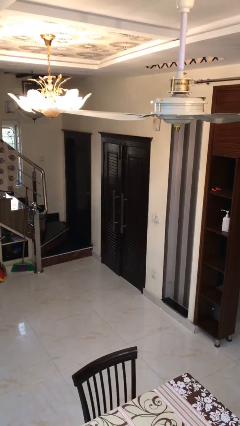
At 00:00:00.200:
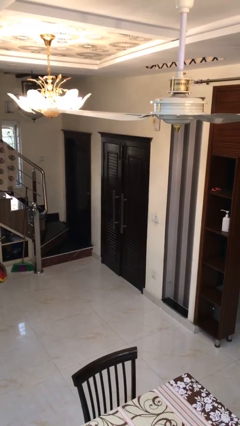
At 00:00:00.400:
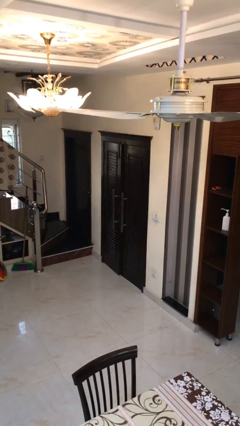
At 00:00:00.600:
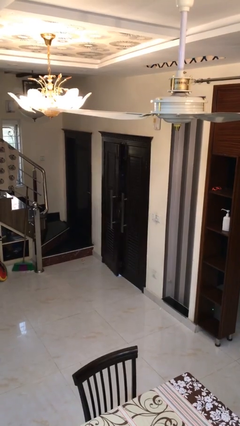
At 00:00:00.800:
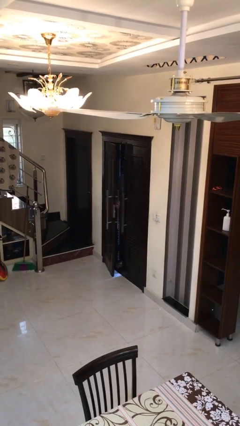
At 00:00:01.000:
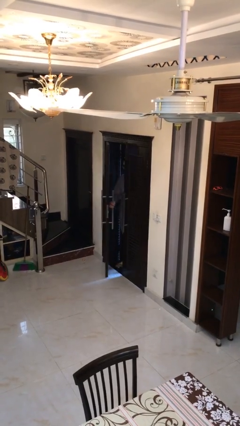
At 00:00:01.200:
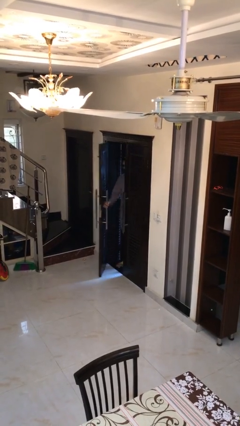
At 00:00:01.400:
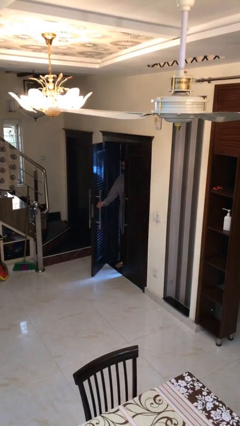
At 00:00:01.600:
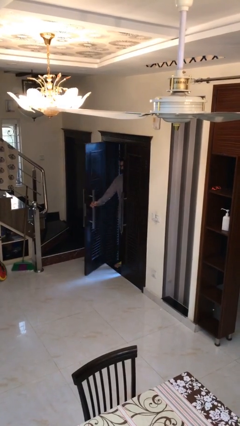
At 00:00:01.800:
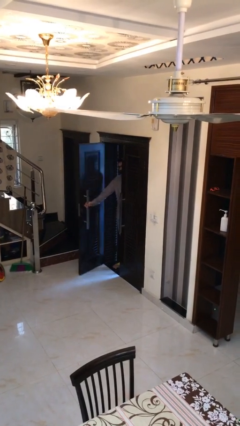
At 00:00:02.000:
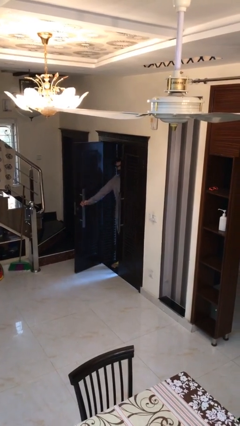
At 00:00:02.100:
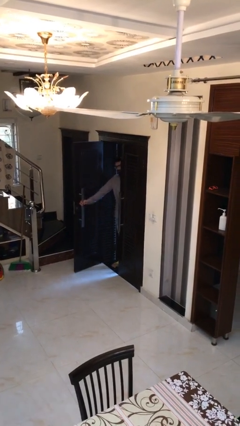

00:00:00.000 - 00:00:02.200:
person opens facility door

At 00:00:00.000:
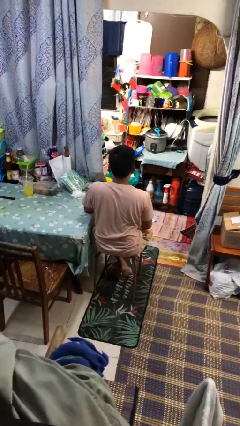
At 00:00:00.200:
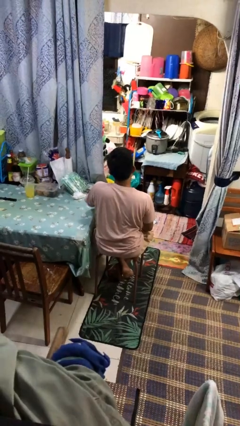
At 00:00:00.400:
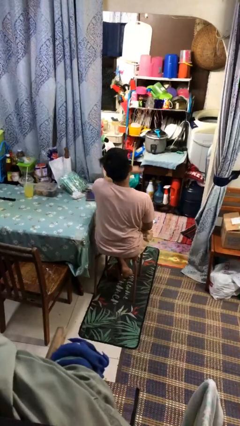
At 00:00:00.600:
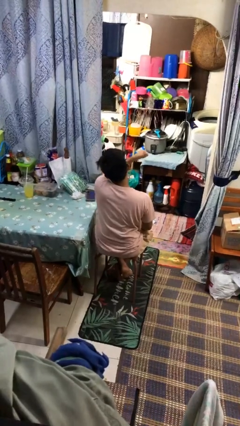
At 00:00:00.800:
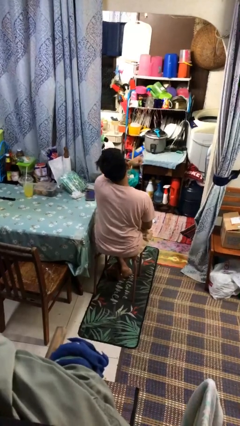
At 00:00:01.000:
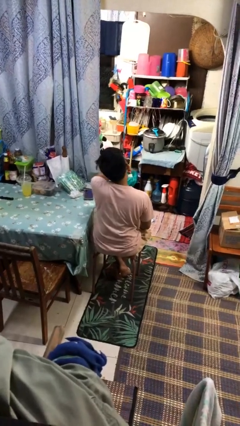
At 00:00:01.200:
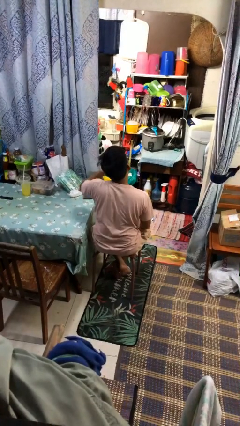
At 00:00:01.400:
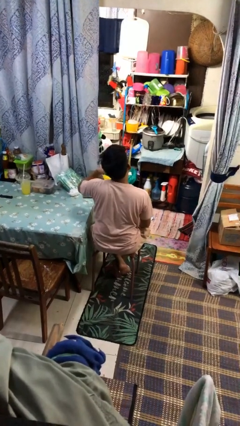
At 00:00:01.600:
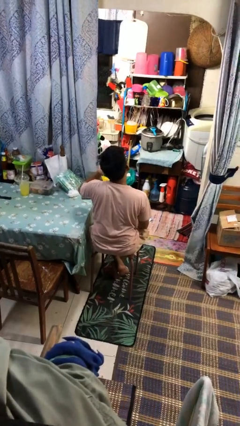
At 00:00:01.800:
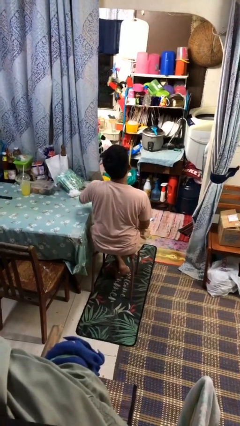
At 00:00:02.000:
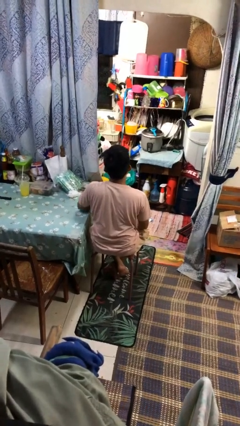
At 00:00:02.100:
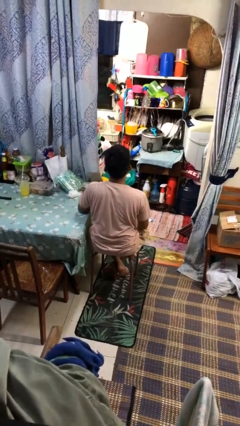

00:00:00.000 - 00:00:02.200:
person gestures cut

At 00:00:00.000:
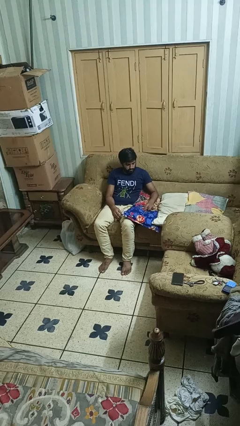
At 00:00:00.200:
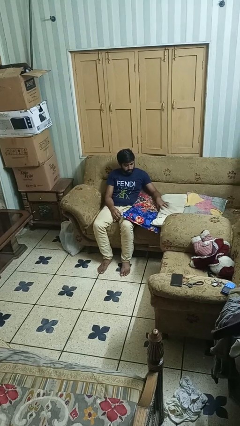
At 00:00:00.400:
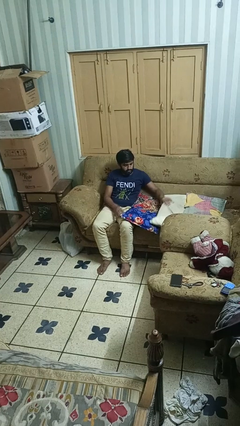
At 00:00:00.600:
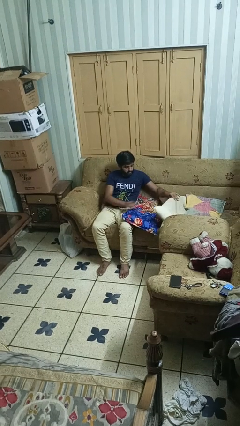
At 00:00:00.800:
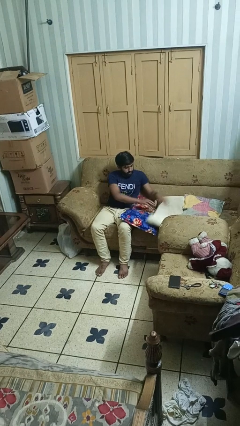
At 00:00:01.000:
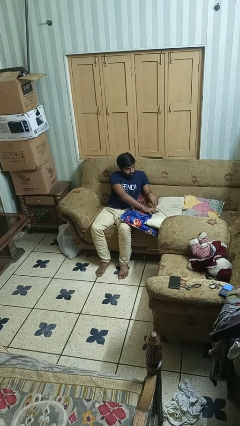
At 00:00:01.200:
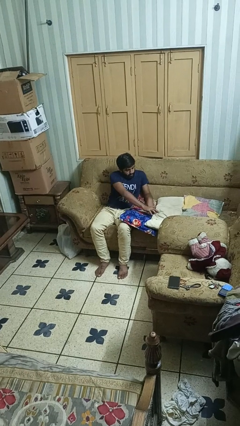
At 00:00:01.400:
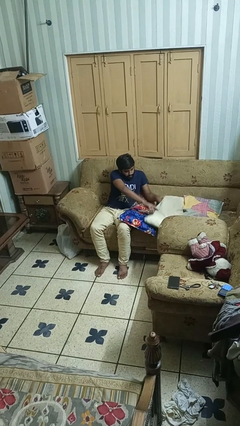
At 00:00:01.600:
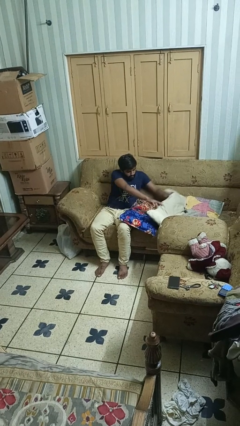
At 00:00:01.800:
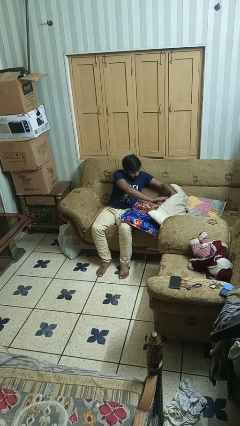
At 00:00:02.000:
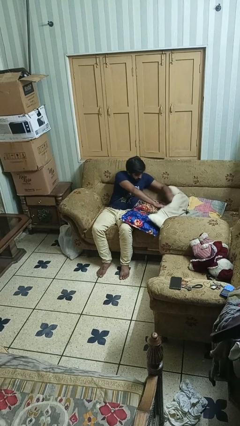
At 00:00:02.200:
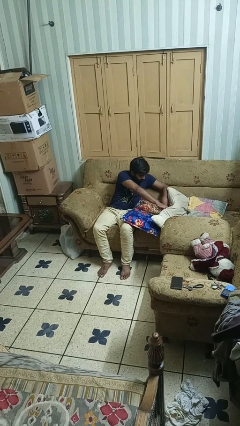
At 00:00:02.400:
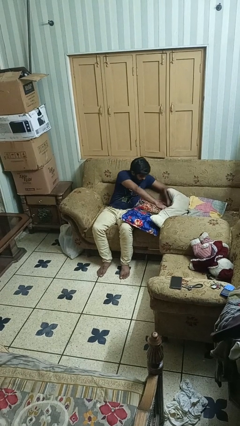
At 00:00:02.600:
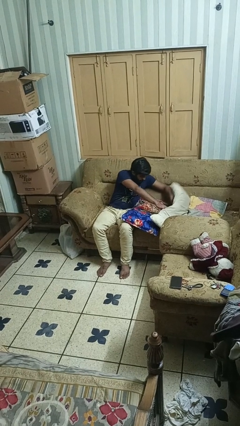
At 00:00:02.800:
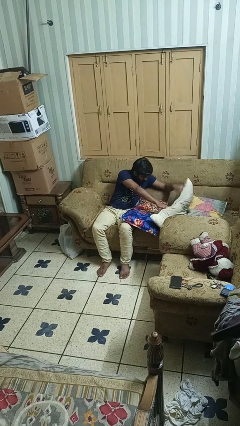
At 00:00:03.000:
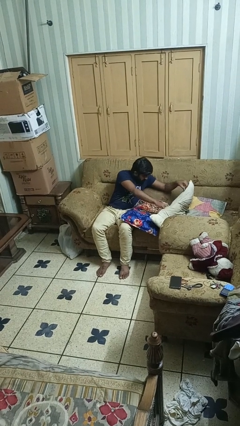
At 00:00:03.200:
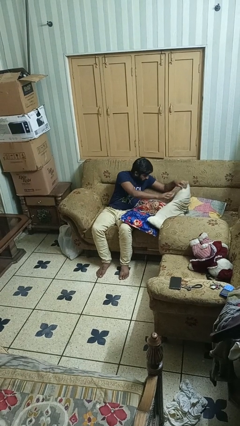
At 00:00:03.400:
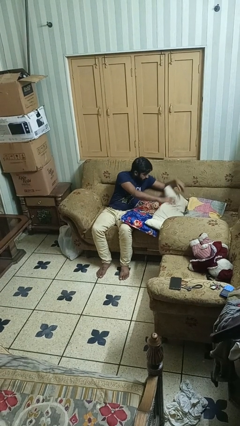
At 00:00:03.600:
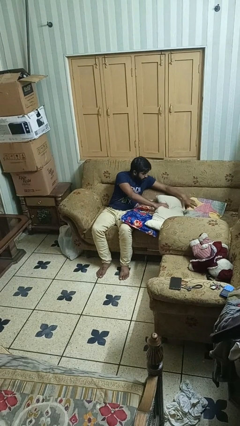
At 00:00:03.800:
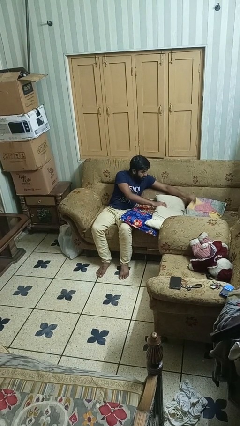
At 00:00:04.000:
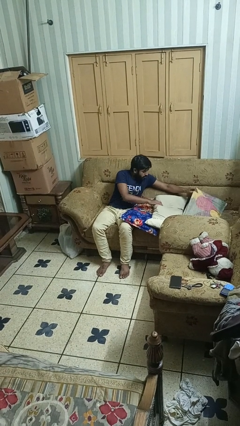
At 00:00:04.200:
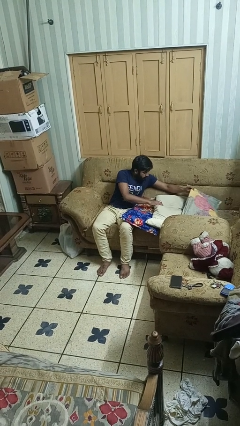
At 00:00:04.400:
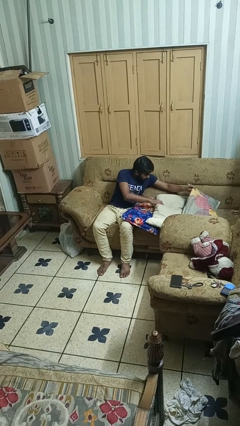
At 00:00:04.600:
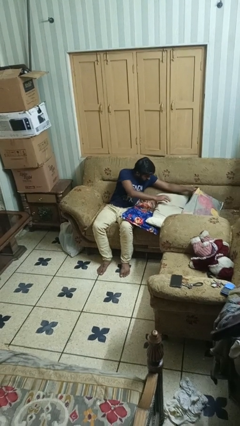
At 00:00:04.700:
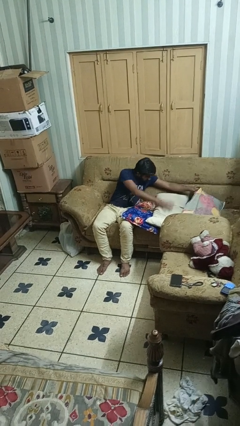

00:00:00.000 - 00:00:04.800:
person searches in couch

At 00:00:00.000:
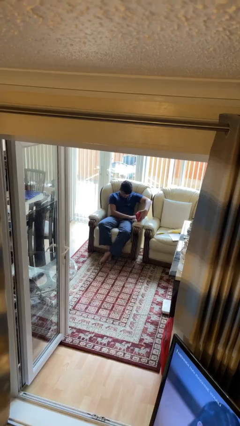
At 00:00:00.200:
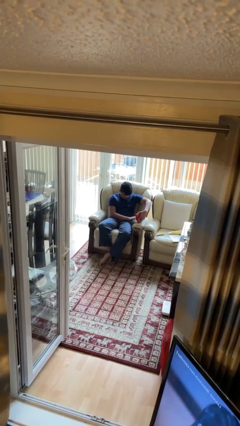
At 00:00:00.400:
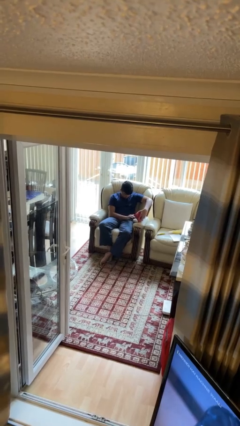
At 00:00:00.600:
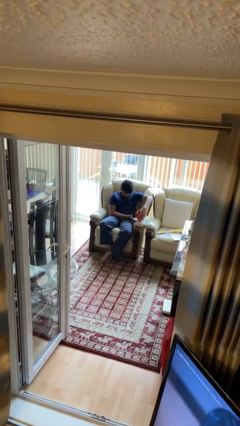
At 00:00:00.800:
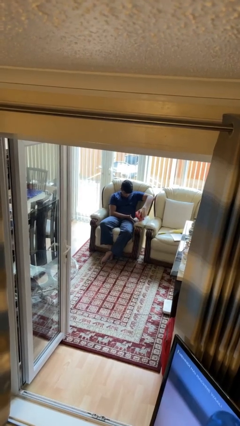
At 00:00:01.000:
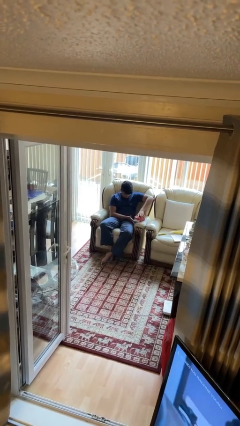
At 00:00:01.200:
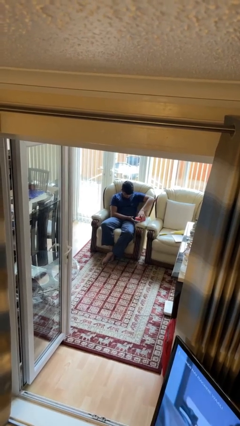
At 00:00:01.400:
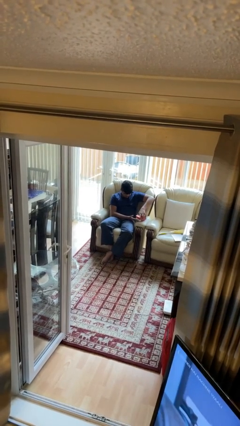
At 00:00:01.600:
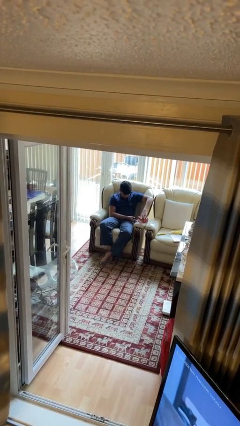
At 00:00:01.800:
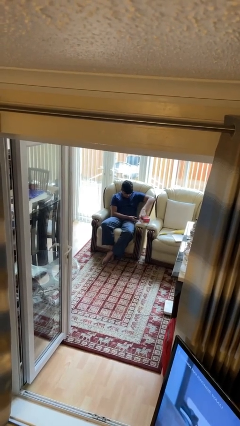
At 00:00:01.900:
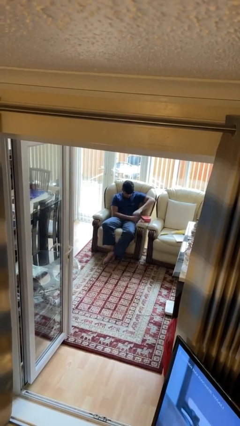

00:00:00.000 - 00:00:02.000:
person closes jewelry box

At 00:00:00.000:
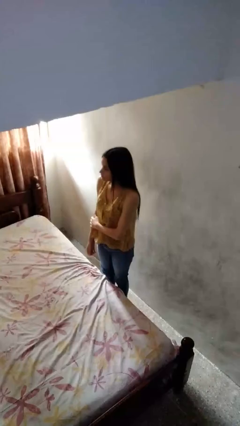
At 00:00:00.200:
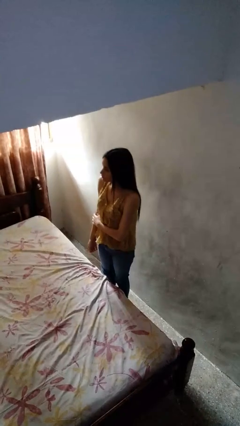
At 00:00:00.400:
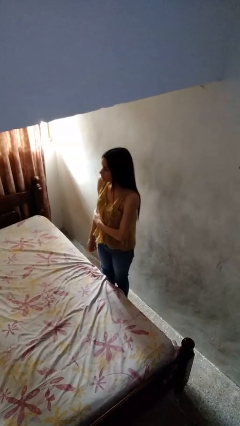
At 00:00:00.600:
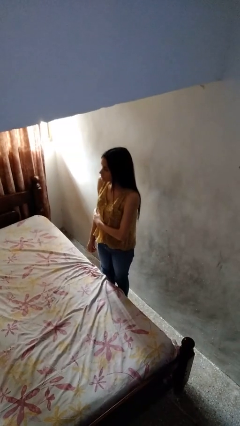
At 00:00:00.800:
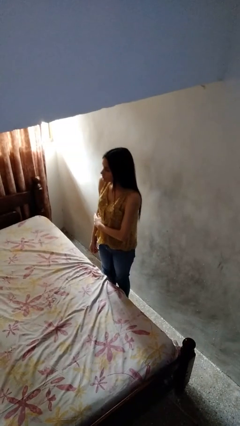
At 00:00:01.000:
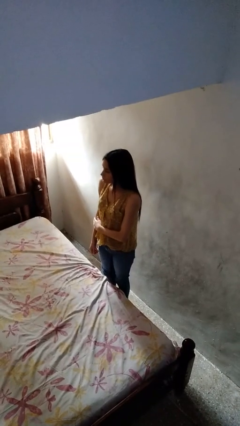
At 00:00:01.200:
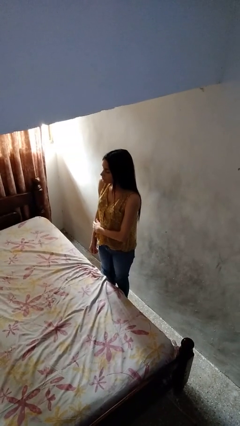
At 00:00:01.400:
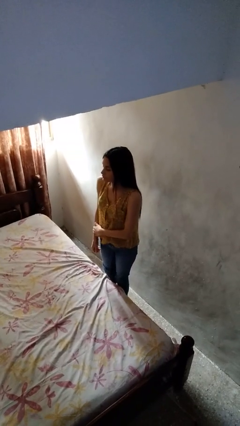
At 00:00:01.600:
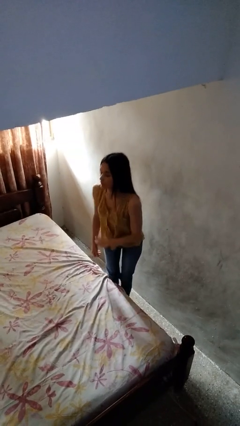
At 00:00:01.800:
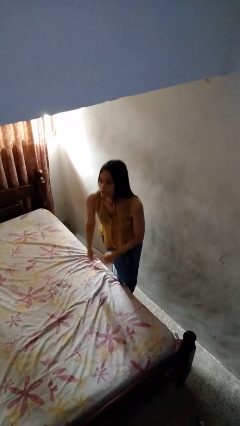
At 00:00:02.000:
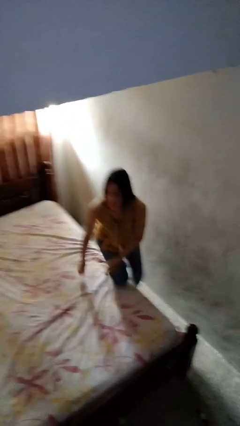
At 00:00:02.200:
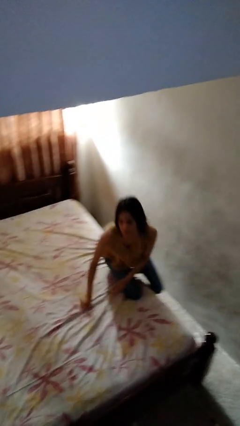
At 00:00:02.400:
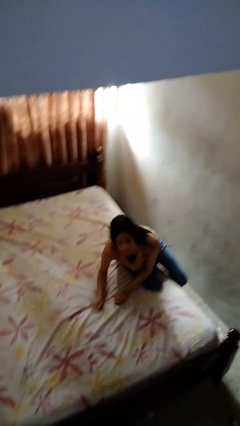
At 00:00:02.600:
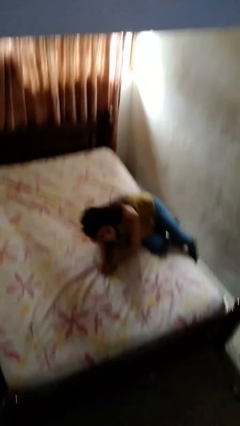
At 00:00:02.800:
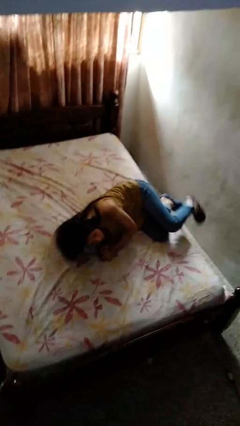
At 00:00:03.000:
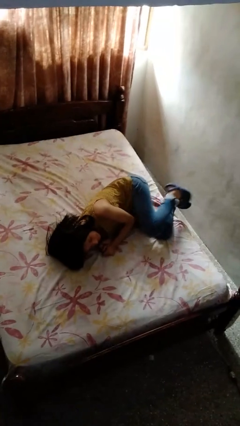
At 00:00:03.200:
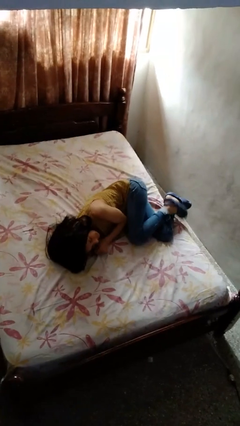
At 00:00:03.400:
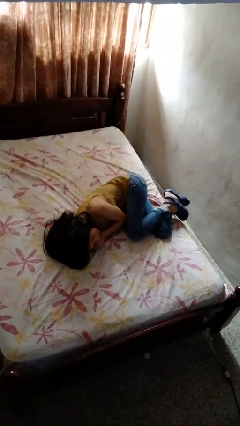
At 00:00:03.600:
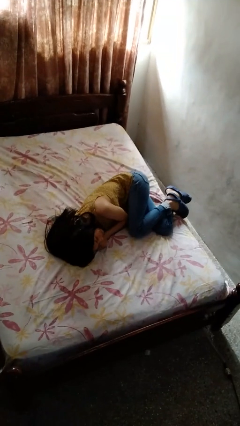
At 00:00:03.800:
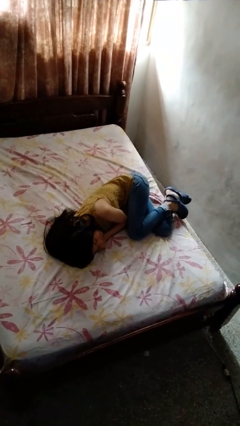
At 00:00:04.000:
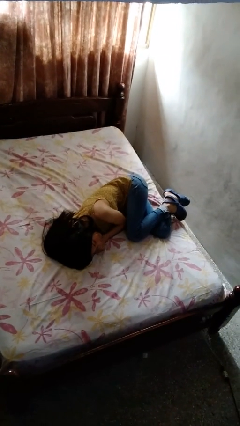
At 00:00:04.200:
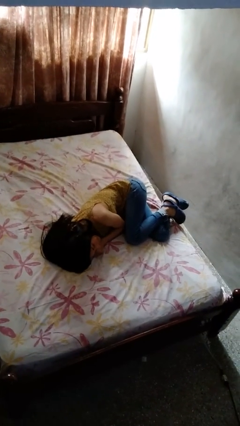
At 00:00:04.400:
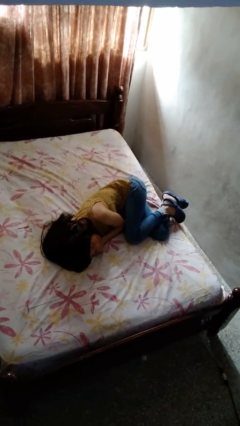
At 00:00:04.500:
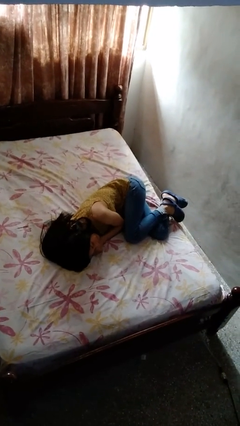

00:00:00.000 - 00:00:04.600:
person lies down on bed

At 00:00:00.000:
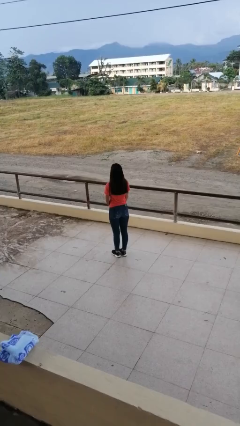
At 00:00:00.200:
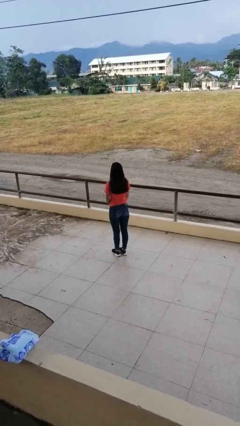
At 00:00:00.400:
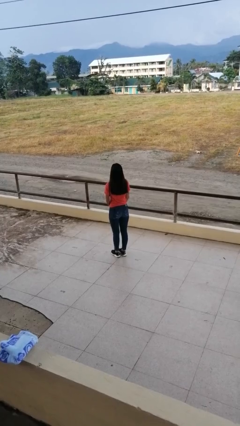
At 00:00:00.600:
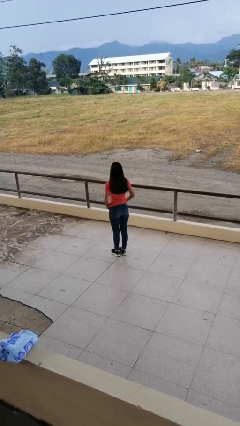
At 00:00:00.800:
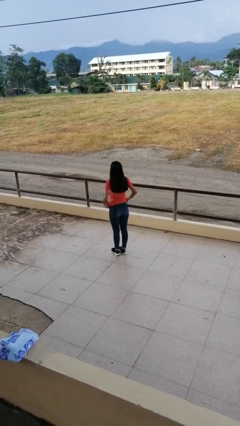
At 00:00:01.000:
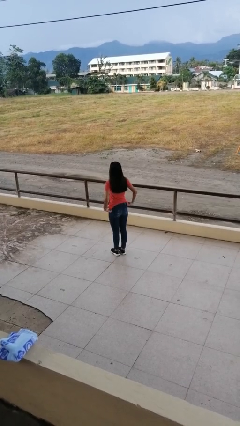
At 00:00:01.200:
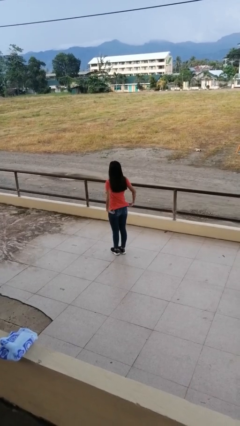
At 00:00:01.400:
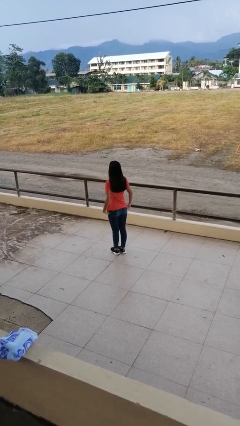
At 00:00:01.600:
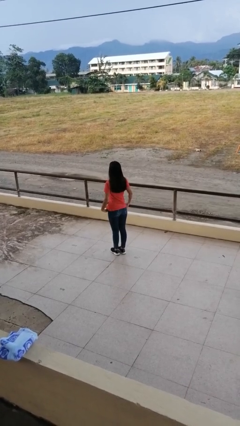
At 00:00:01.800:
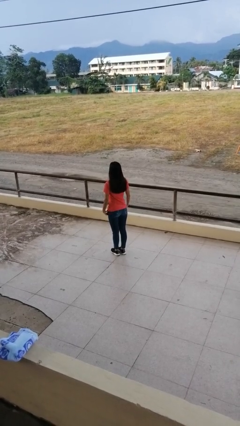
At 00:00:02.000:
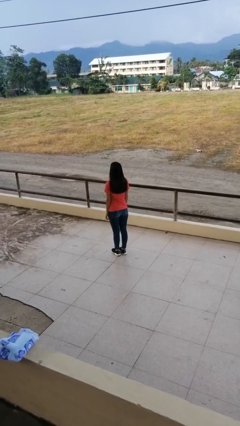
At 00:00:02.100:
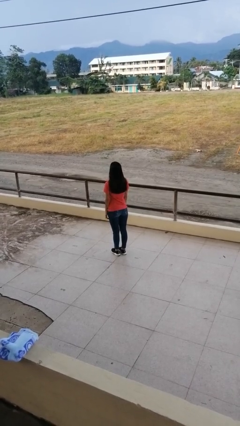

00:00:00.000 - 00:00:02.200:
person untucks shirt
